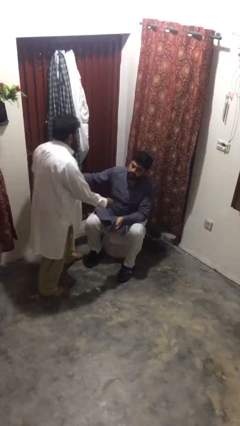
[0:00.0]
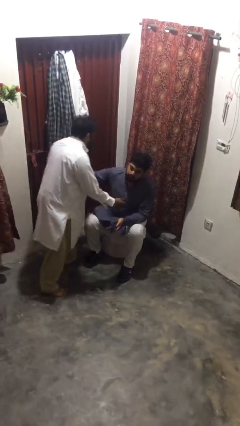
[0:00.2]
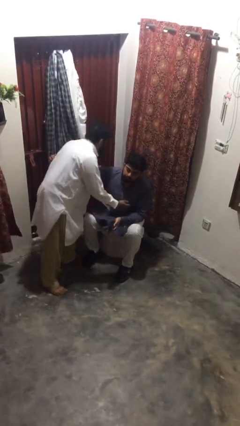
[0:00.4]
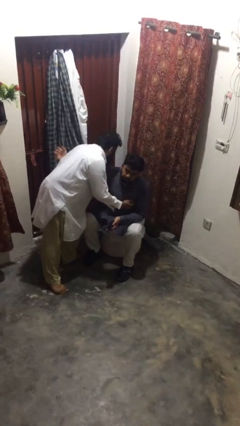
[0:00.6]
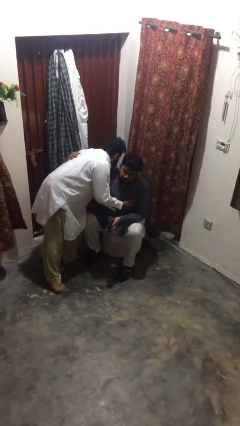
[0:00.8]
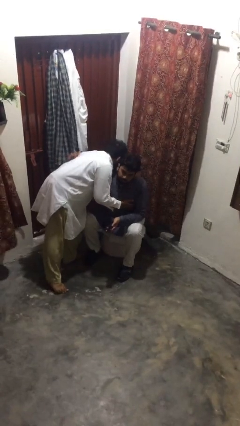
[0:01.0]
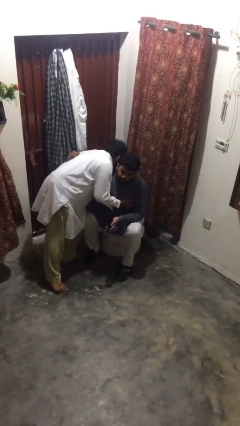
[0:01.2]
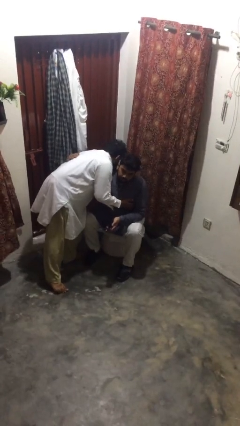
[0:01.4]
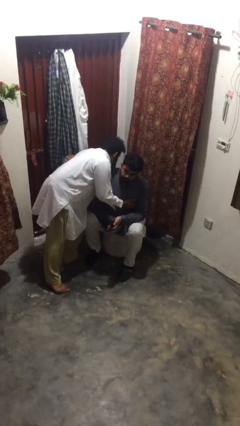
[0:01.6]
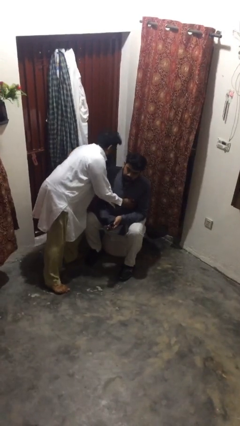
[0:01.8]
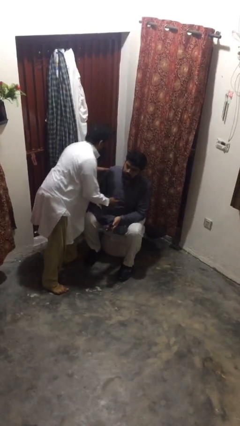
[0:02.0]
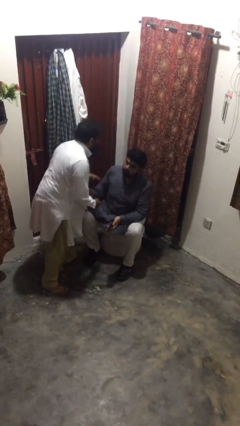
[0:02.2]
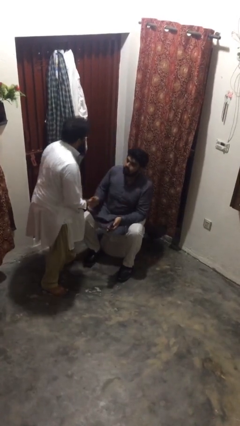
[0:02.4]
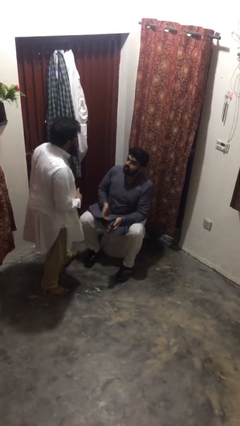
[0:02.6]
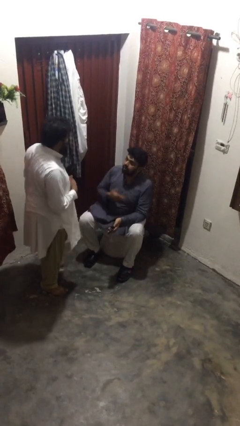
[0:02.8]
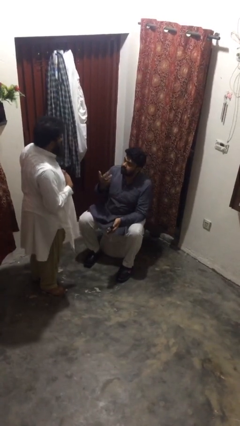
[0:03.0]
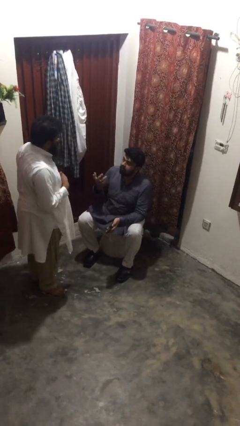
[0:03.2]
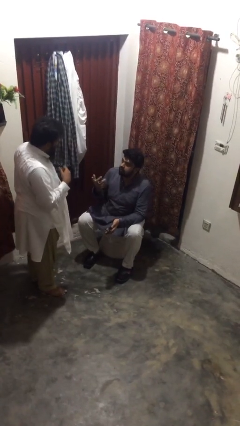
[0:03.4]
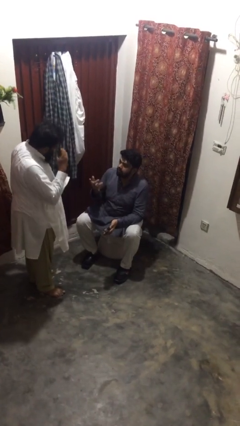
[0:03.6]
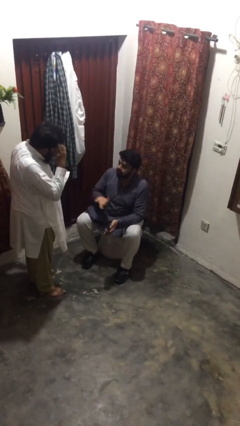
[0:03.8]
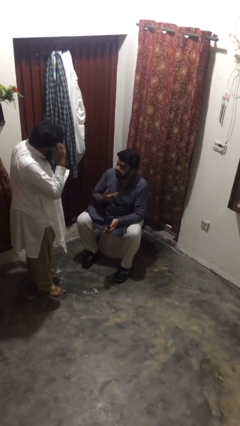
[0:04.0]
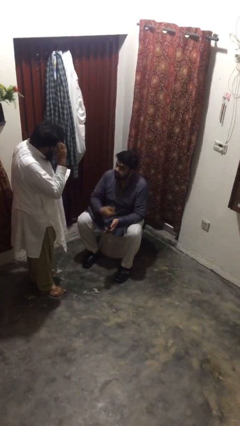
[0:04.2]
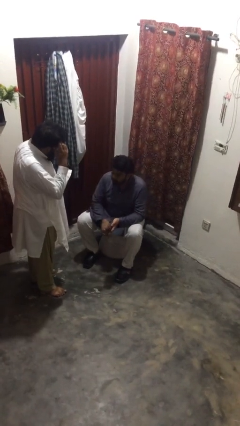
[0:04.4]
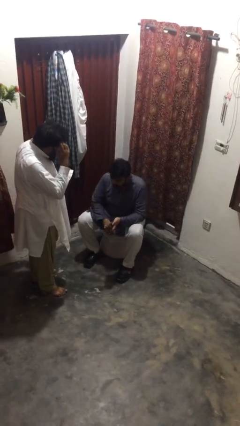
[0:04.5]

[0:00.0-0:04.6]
person embraces person

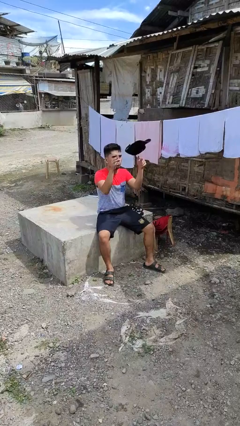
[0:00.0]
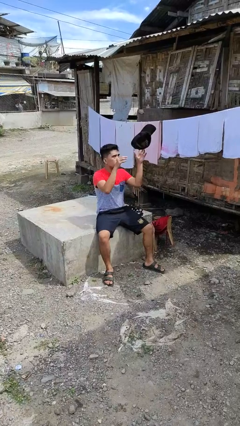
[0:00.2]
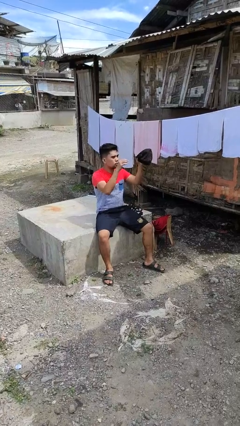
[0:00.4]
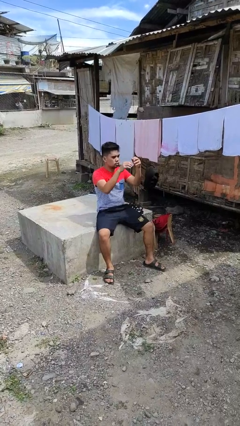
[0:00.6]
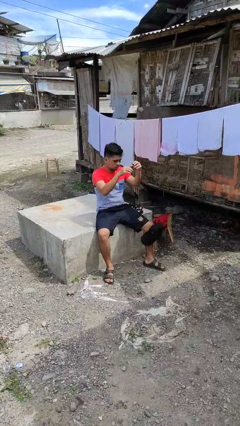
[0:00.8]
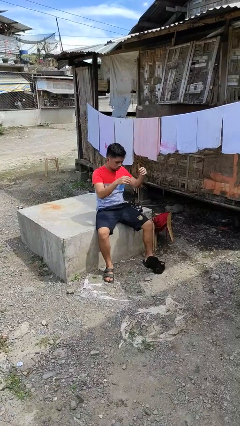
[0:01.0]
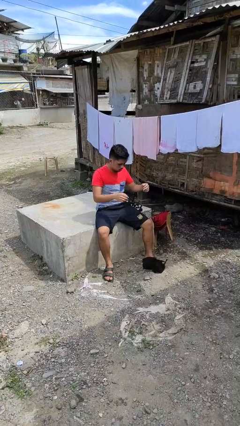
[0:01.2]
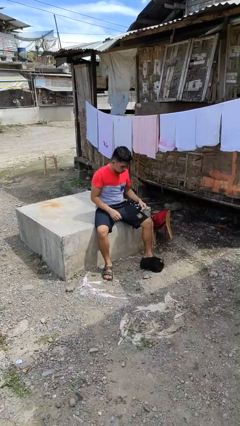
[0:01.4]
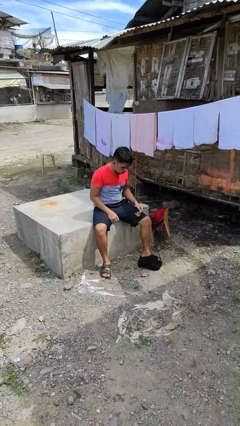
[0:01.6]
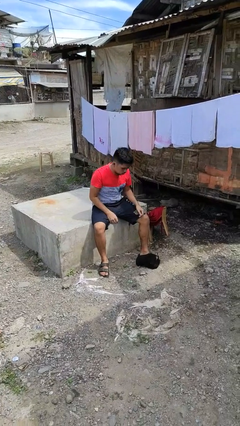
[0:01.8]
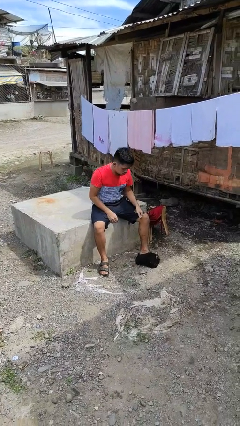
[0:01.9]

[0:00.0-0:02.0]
person drops object

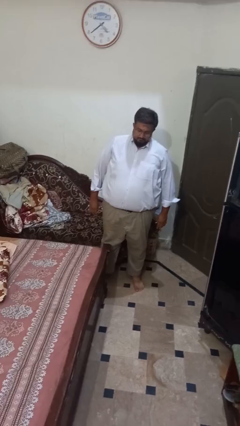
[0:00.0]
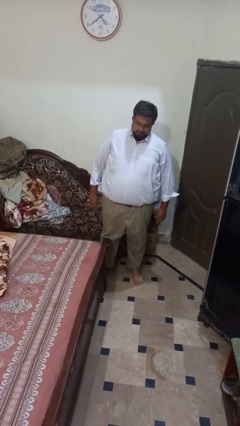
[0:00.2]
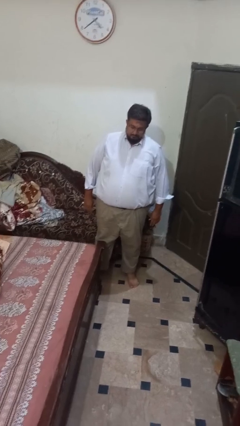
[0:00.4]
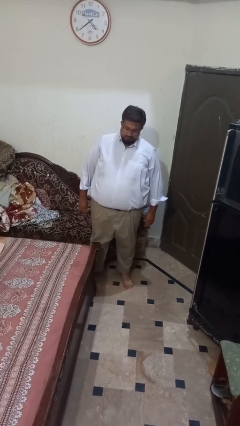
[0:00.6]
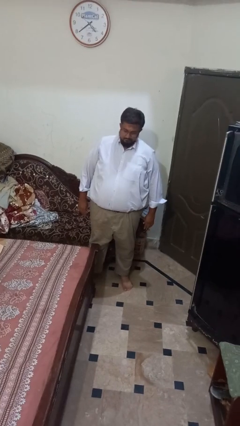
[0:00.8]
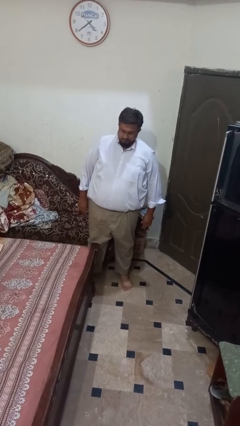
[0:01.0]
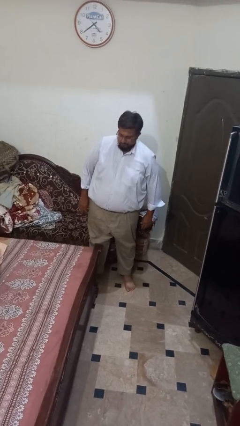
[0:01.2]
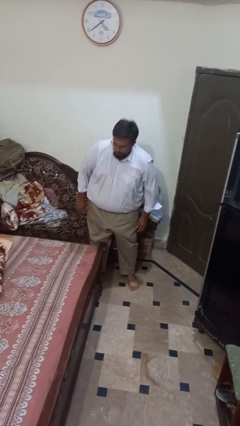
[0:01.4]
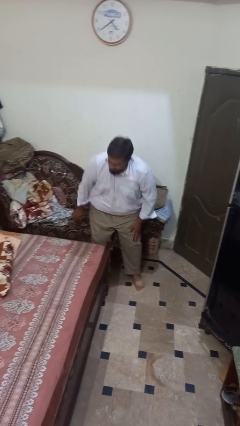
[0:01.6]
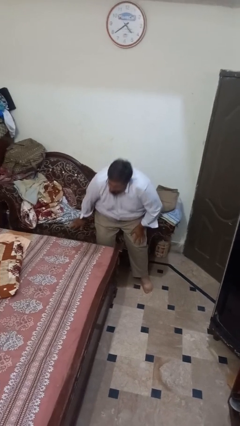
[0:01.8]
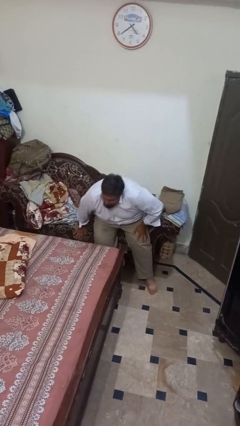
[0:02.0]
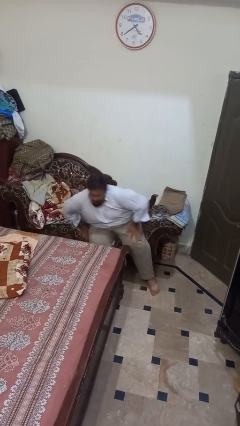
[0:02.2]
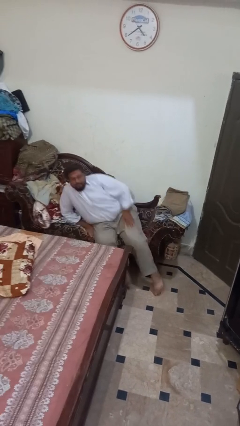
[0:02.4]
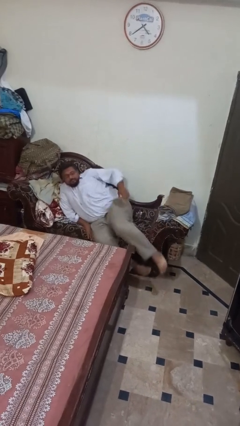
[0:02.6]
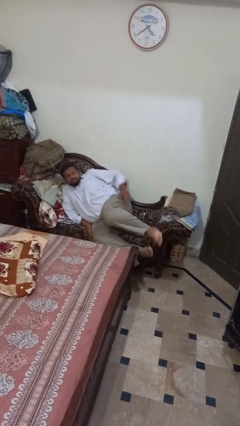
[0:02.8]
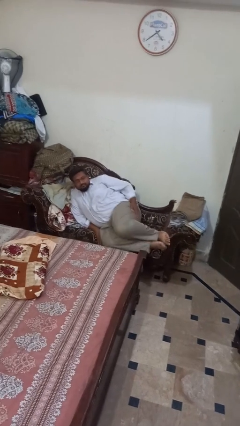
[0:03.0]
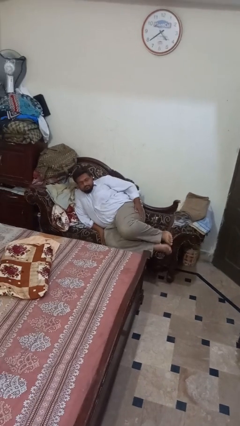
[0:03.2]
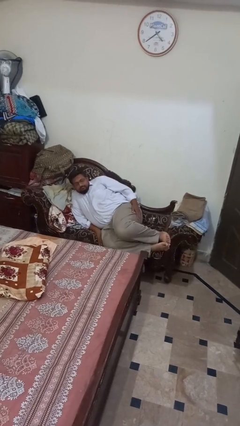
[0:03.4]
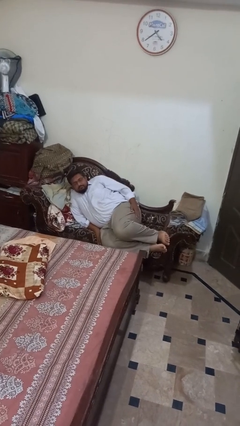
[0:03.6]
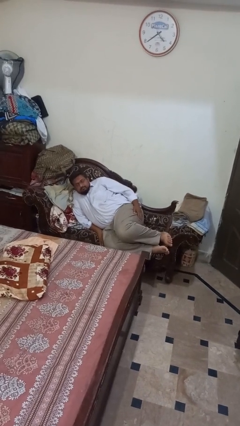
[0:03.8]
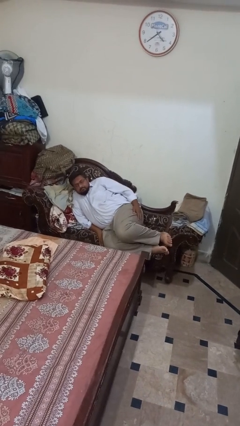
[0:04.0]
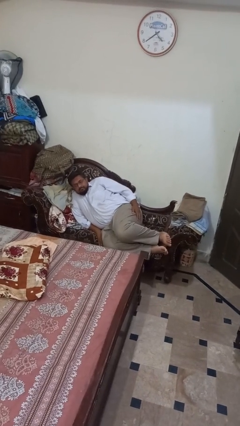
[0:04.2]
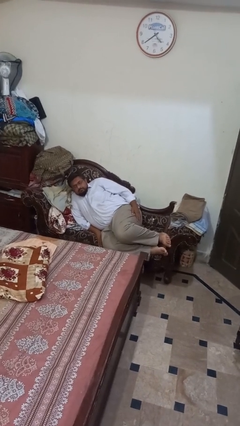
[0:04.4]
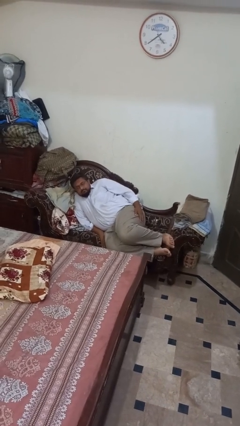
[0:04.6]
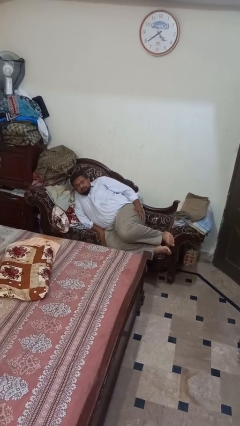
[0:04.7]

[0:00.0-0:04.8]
person lies down on couch

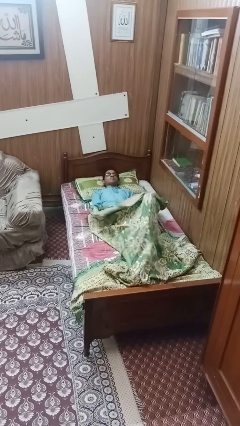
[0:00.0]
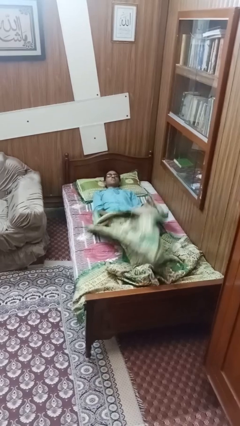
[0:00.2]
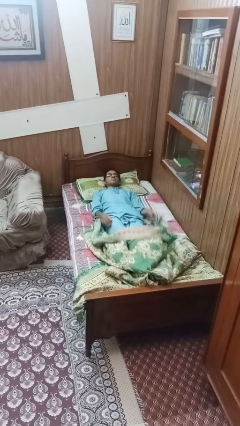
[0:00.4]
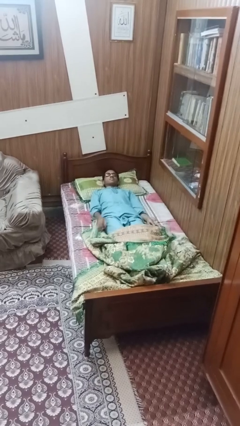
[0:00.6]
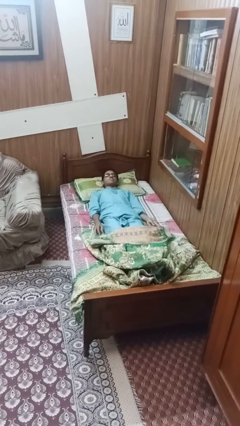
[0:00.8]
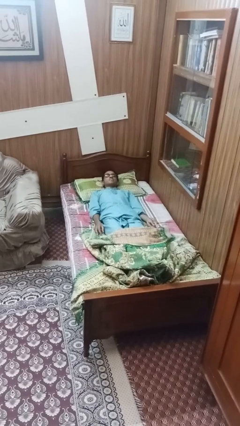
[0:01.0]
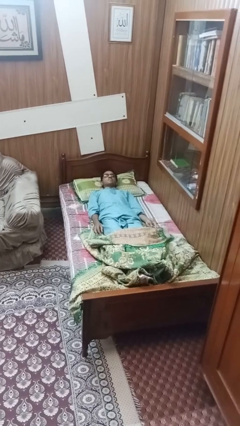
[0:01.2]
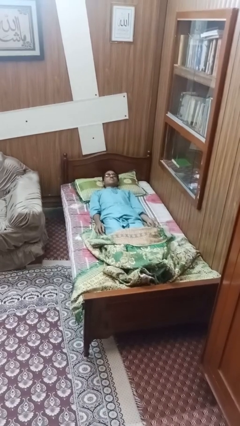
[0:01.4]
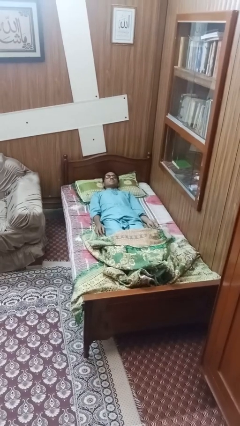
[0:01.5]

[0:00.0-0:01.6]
person uncovers with bedsheets

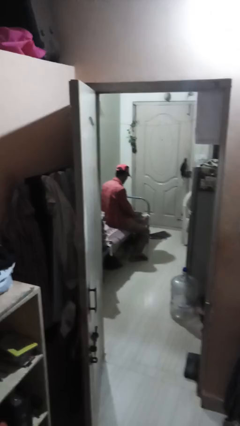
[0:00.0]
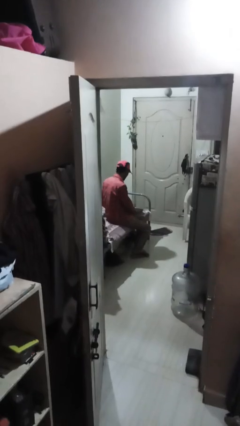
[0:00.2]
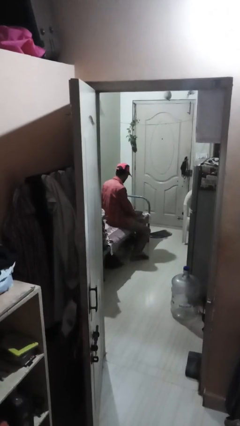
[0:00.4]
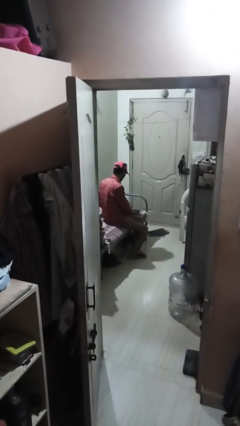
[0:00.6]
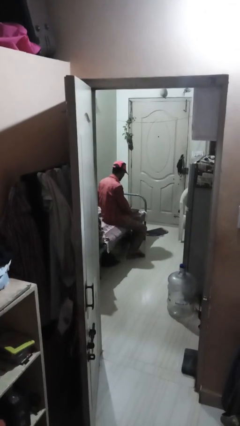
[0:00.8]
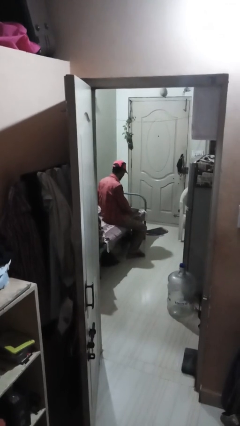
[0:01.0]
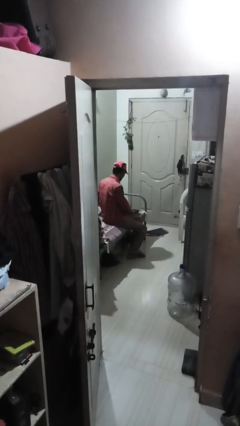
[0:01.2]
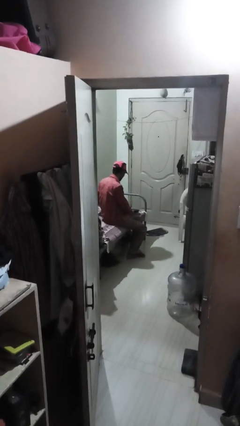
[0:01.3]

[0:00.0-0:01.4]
person opens laptop

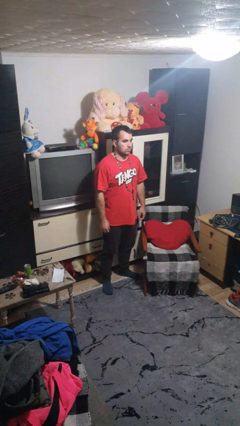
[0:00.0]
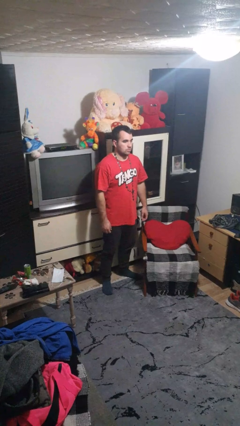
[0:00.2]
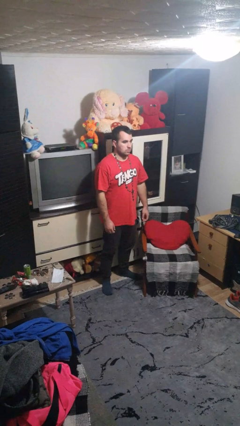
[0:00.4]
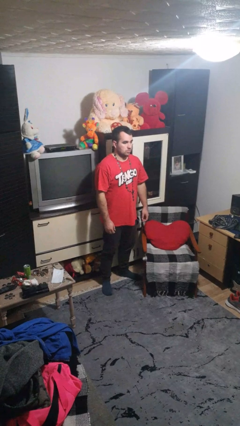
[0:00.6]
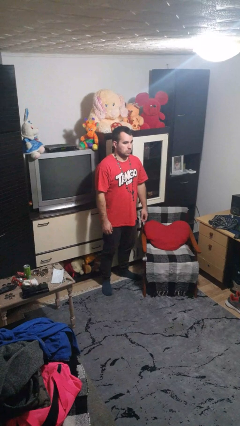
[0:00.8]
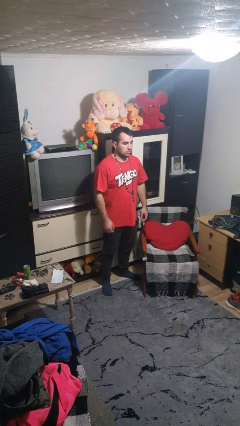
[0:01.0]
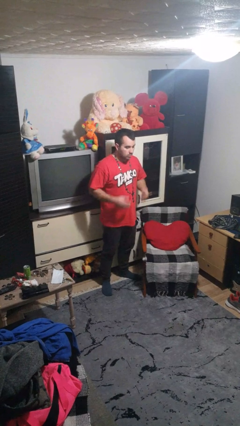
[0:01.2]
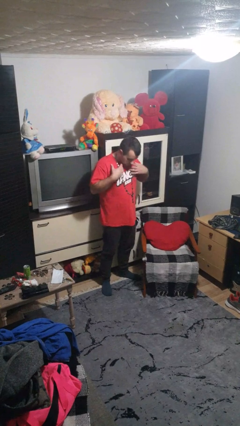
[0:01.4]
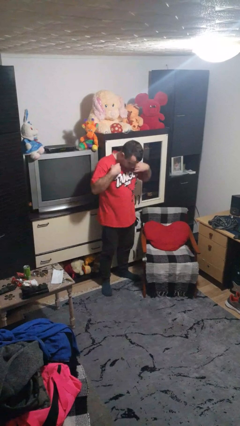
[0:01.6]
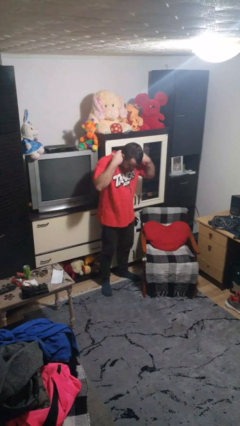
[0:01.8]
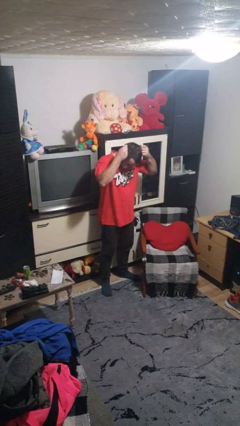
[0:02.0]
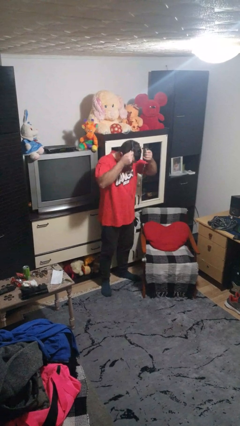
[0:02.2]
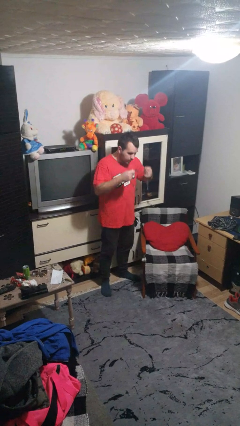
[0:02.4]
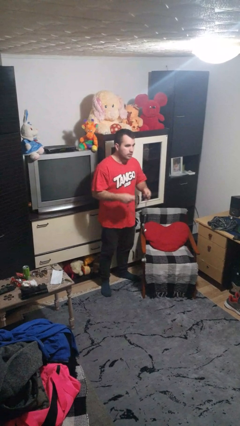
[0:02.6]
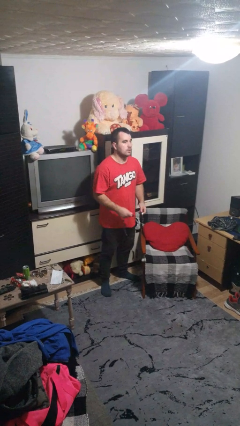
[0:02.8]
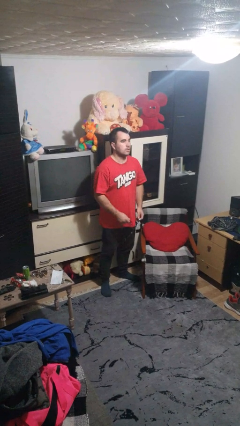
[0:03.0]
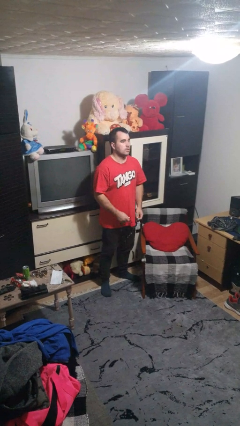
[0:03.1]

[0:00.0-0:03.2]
person takes off necklace
